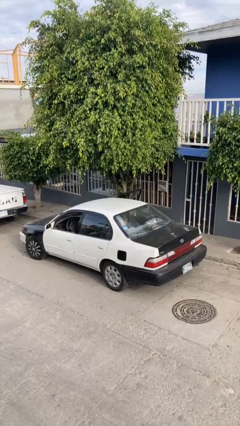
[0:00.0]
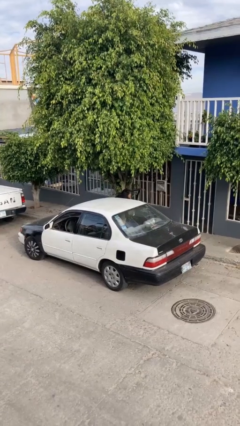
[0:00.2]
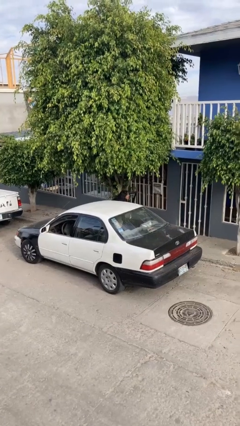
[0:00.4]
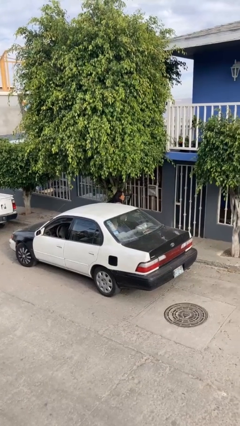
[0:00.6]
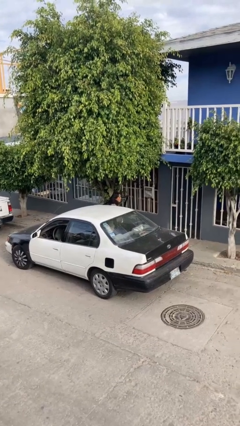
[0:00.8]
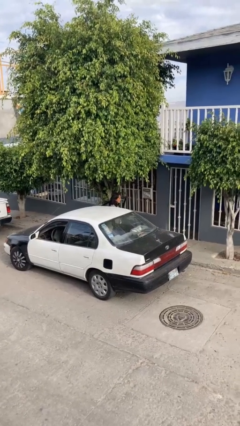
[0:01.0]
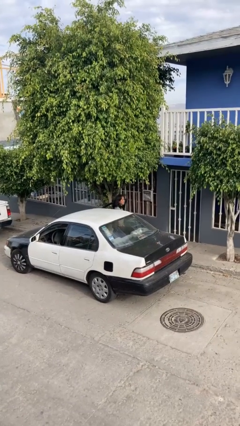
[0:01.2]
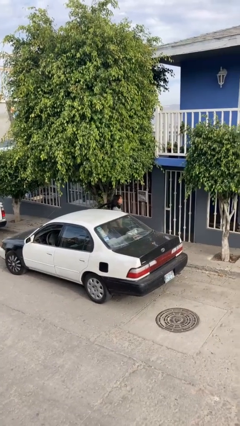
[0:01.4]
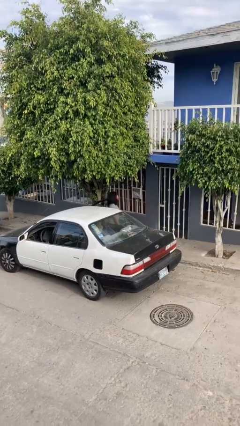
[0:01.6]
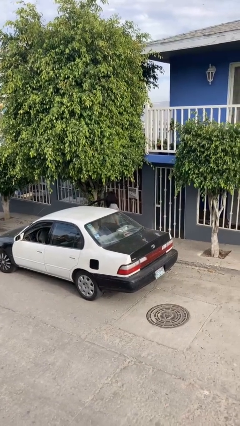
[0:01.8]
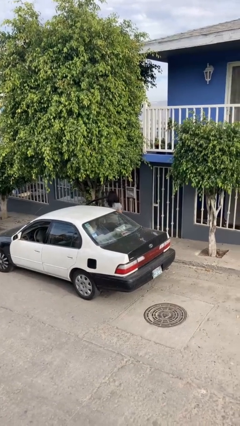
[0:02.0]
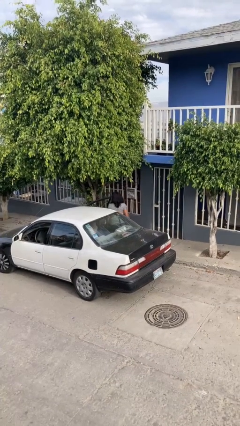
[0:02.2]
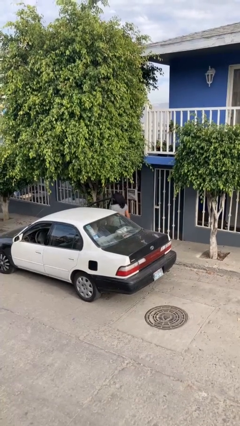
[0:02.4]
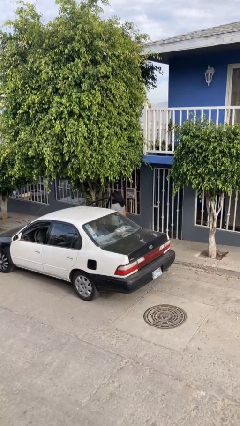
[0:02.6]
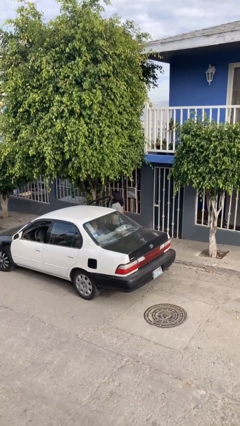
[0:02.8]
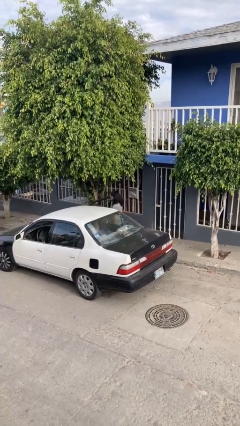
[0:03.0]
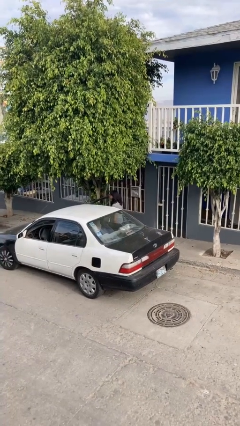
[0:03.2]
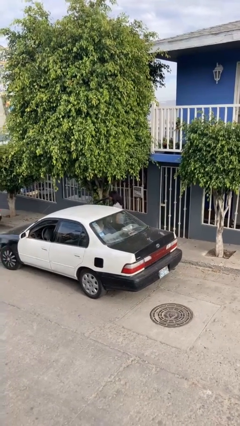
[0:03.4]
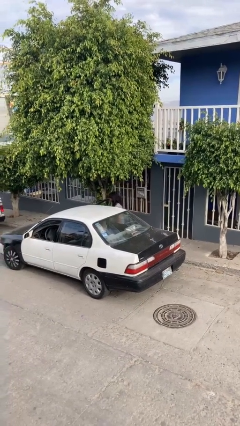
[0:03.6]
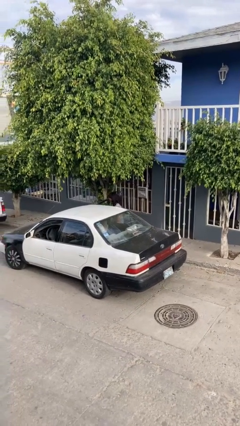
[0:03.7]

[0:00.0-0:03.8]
person exits car

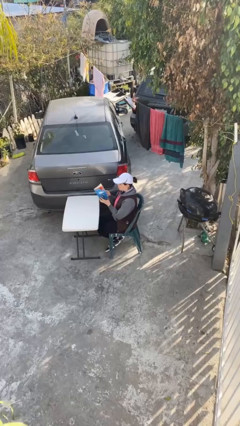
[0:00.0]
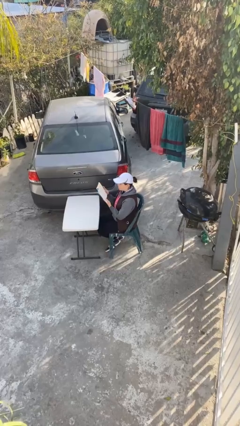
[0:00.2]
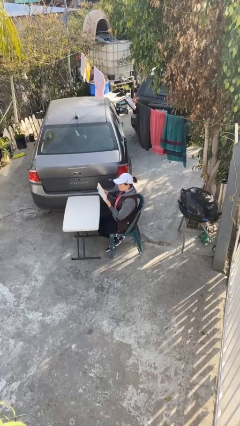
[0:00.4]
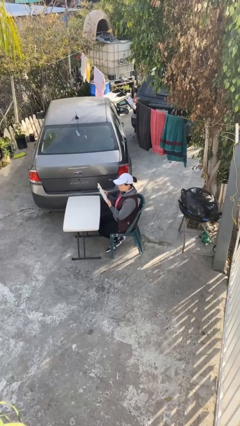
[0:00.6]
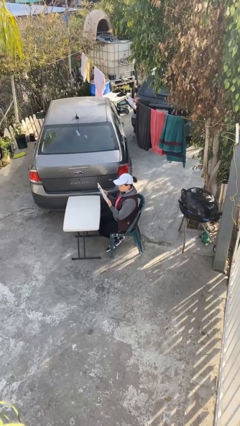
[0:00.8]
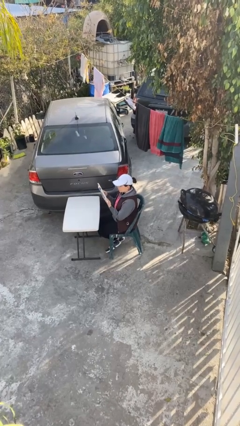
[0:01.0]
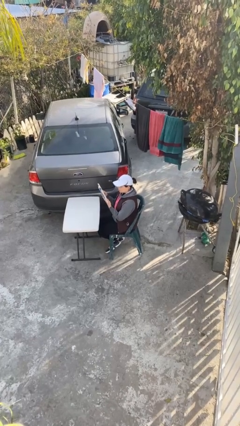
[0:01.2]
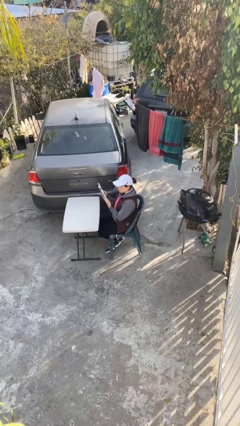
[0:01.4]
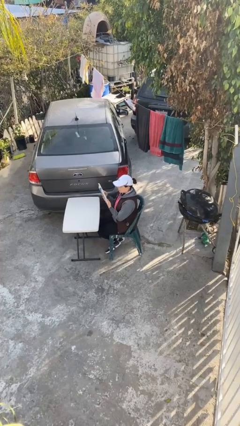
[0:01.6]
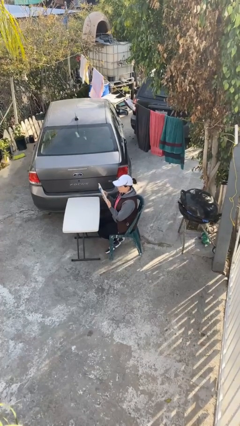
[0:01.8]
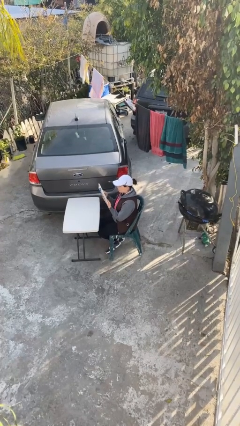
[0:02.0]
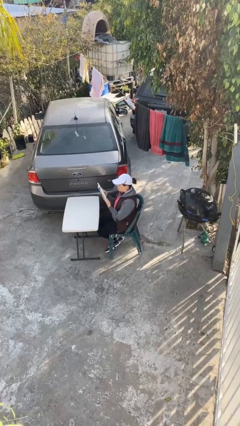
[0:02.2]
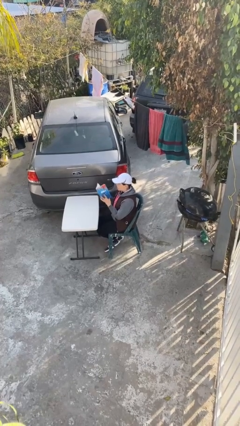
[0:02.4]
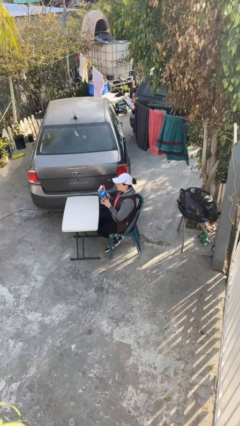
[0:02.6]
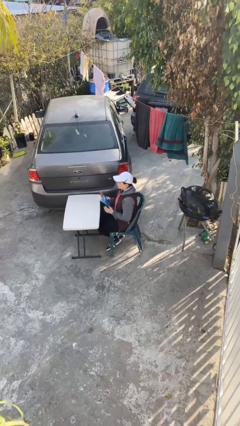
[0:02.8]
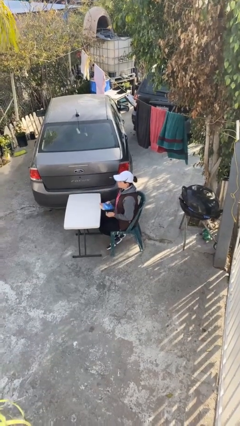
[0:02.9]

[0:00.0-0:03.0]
person reads document

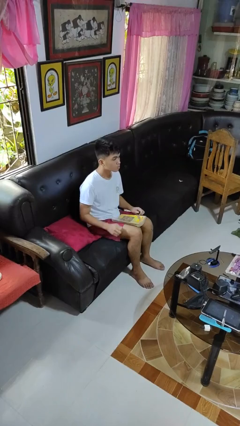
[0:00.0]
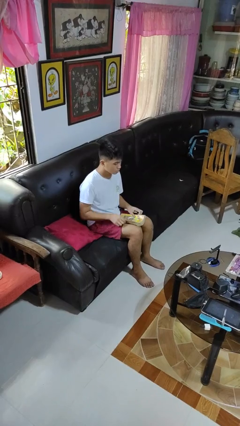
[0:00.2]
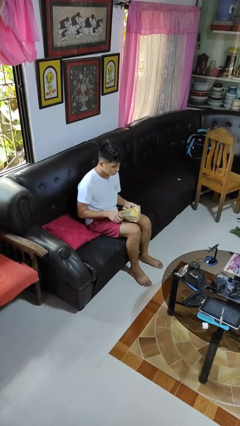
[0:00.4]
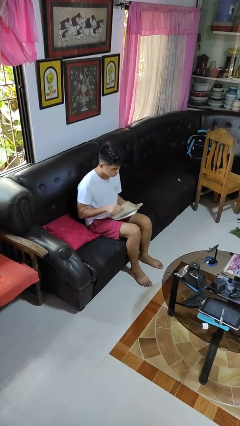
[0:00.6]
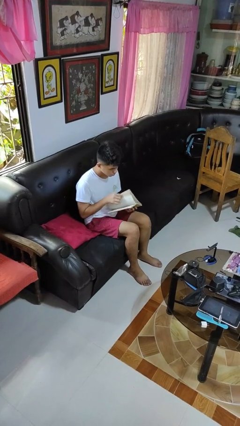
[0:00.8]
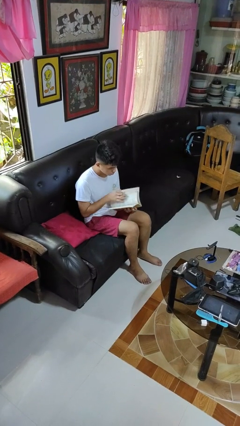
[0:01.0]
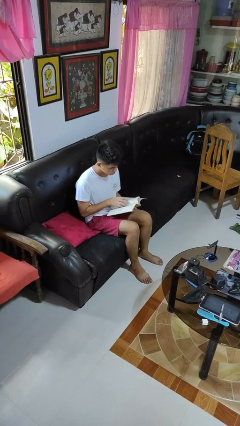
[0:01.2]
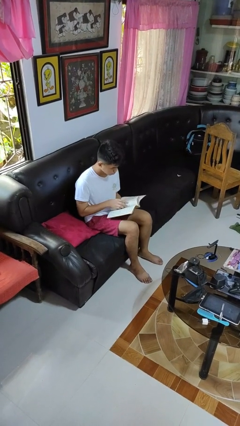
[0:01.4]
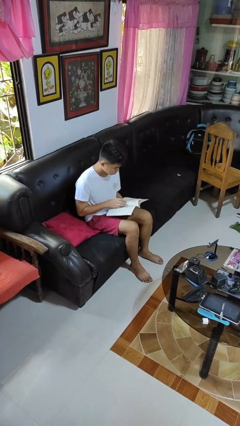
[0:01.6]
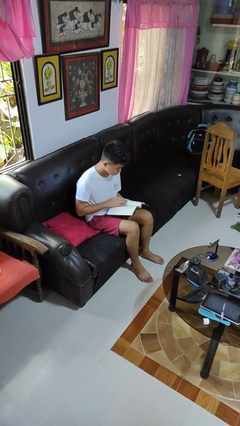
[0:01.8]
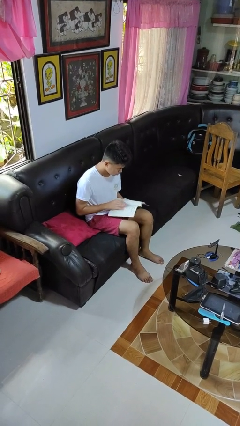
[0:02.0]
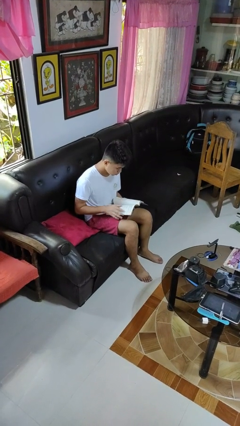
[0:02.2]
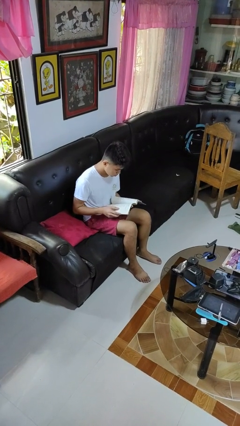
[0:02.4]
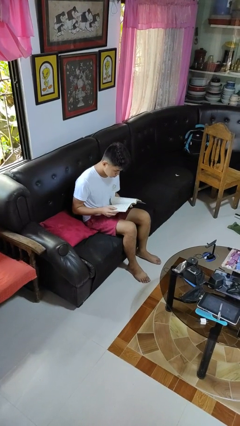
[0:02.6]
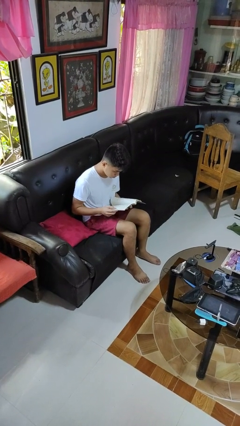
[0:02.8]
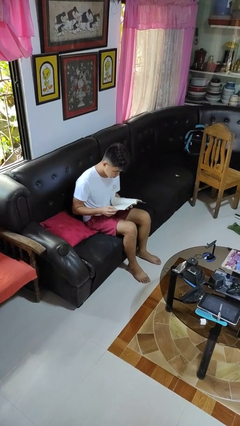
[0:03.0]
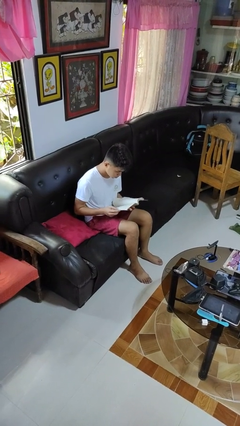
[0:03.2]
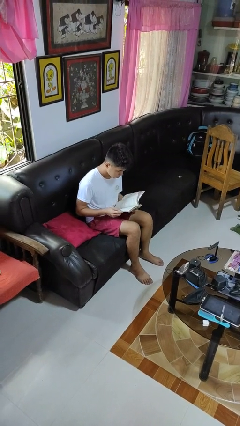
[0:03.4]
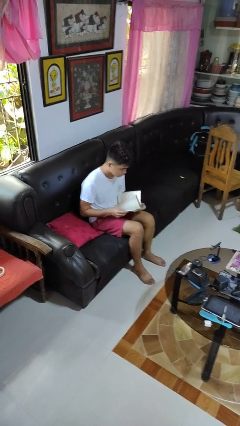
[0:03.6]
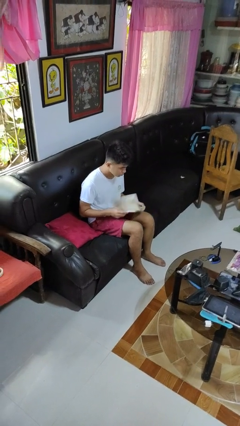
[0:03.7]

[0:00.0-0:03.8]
person reads book

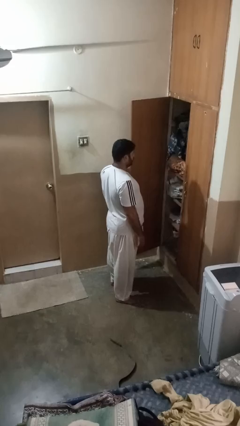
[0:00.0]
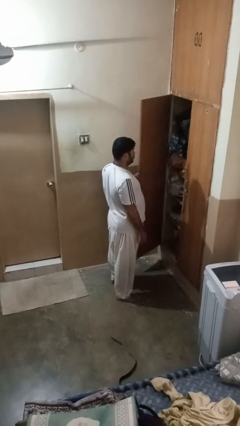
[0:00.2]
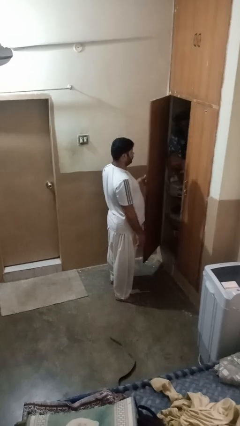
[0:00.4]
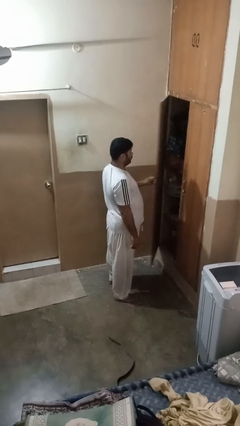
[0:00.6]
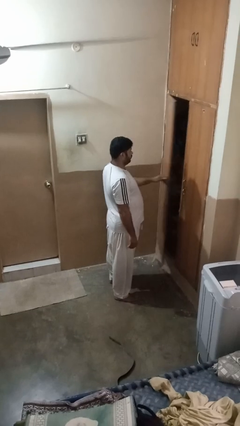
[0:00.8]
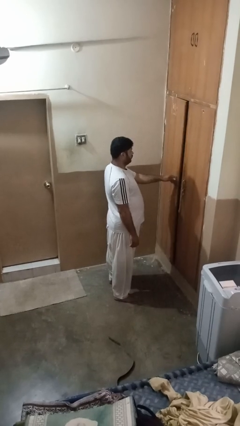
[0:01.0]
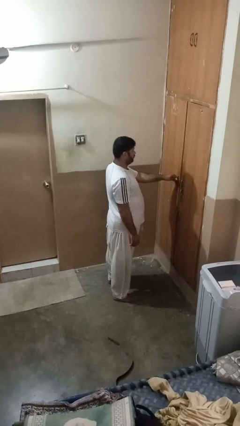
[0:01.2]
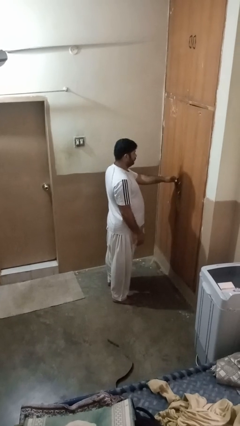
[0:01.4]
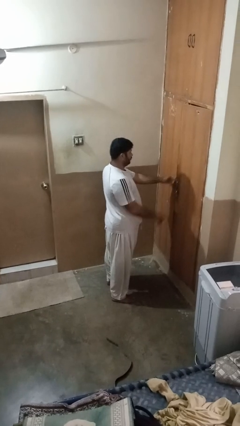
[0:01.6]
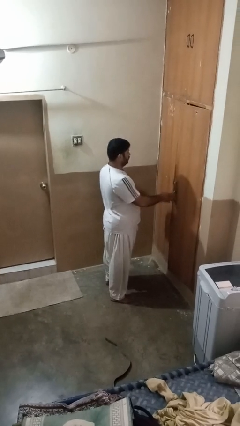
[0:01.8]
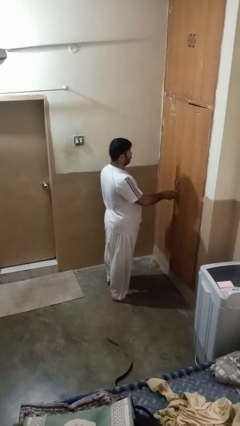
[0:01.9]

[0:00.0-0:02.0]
person closes closet door

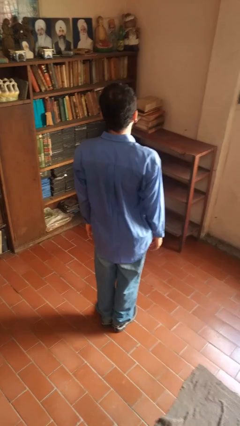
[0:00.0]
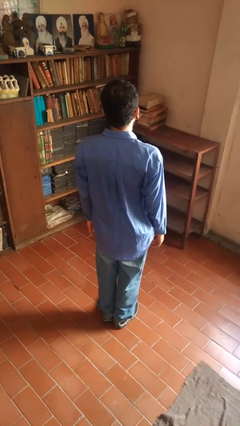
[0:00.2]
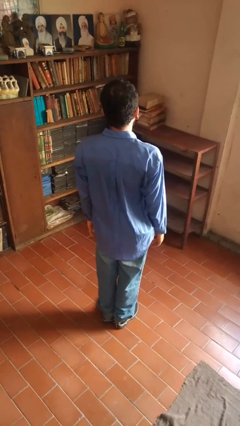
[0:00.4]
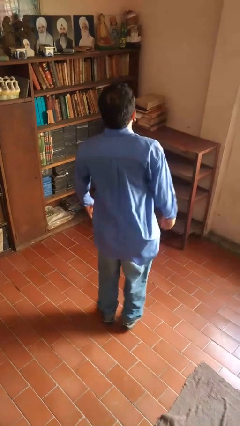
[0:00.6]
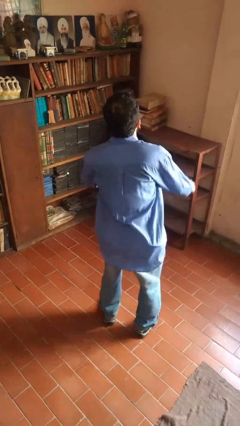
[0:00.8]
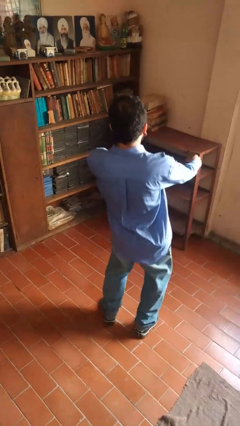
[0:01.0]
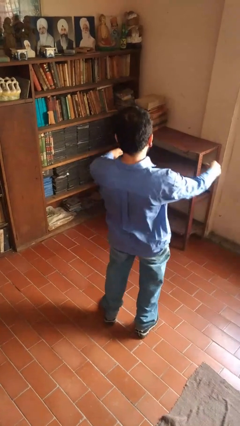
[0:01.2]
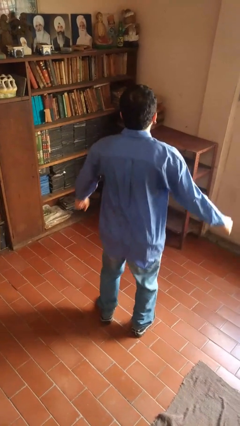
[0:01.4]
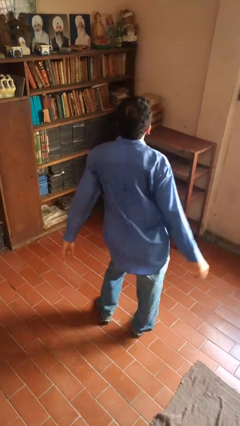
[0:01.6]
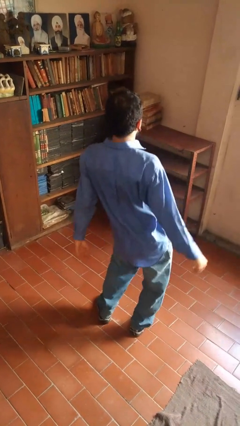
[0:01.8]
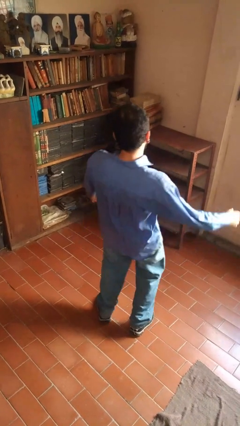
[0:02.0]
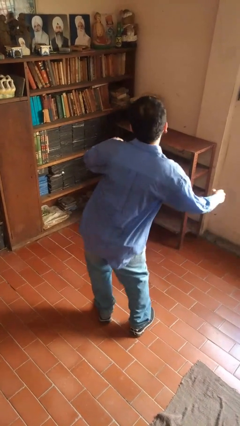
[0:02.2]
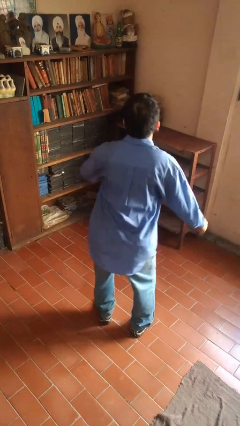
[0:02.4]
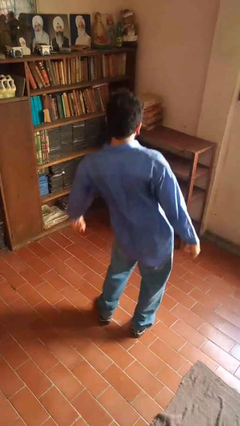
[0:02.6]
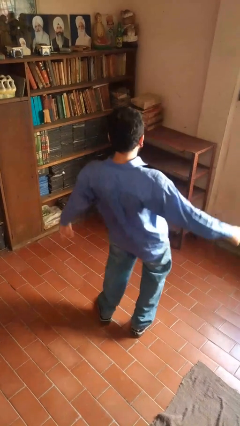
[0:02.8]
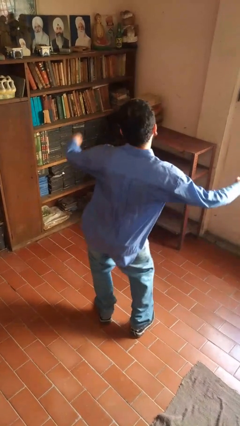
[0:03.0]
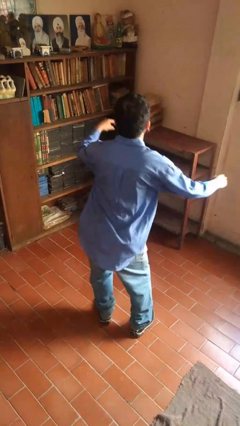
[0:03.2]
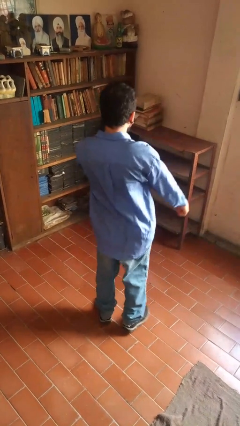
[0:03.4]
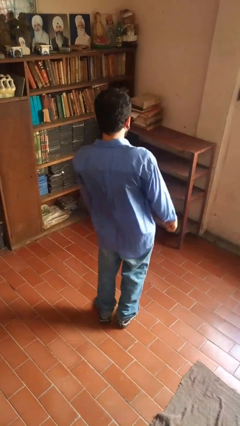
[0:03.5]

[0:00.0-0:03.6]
person wiggles hips

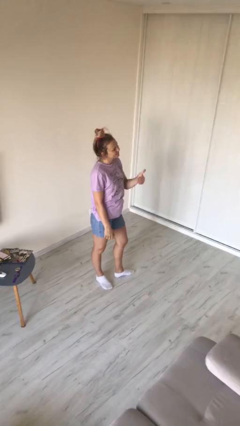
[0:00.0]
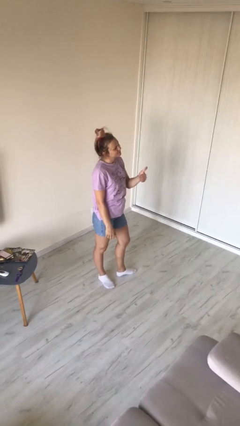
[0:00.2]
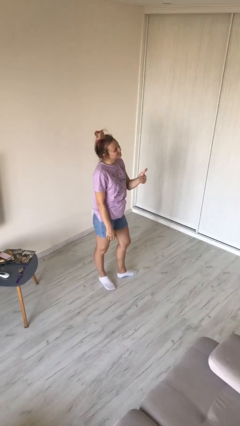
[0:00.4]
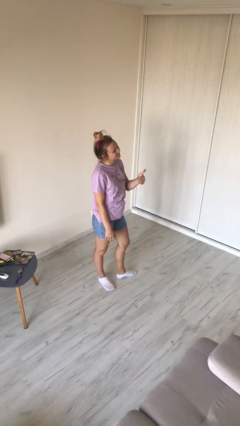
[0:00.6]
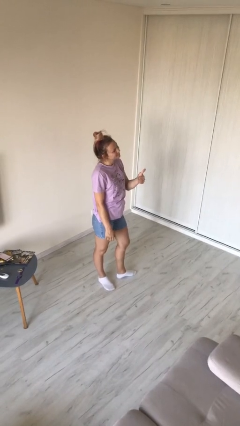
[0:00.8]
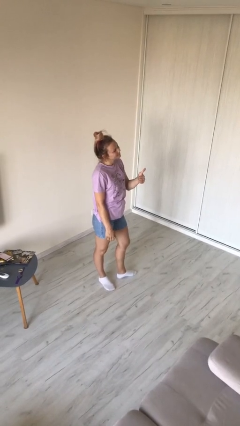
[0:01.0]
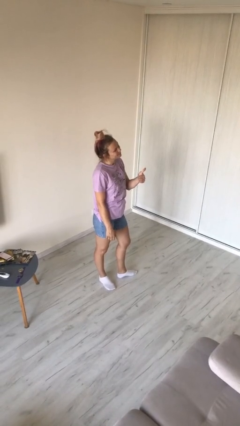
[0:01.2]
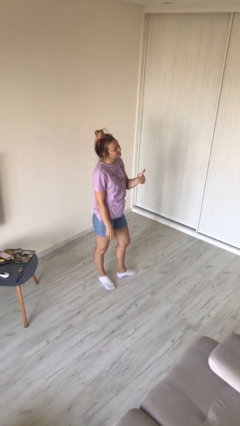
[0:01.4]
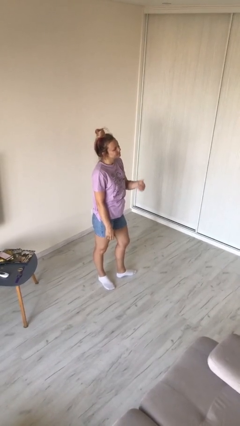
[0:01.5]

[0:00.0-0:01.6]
person gestures thumbs up
